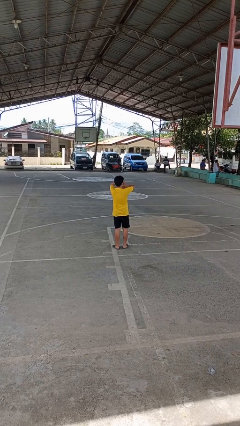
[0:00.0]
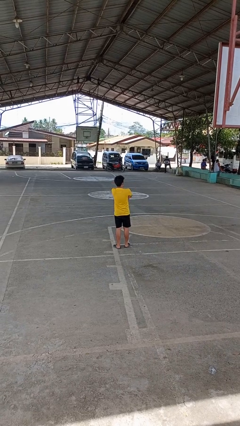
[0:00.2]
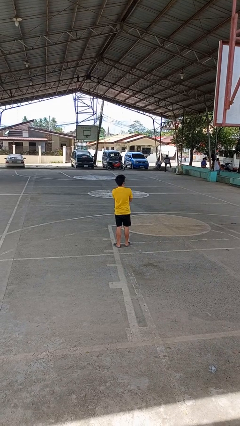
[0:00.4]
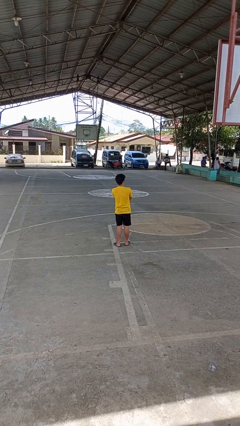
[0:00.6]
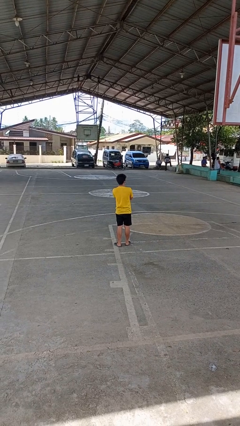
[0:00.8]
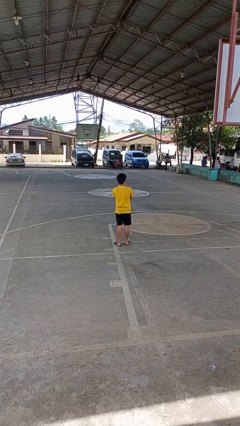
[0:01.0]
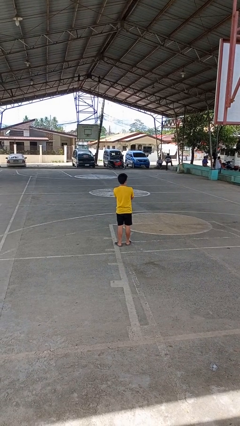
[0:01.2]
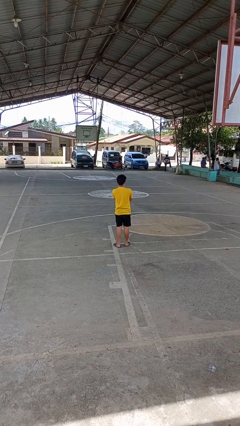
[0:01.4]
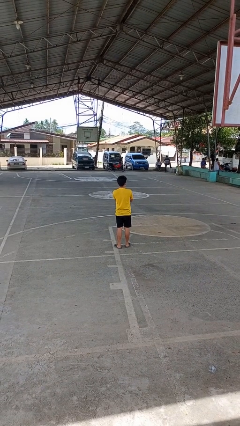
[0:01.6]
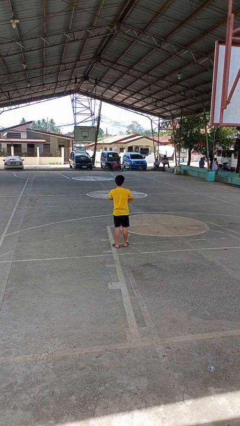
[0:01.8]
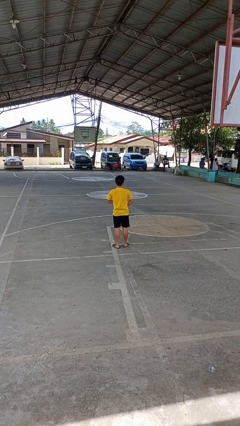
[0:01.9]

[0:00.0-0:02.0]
person crosses arms

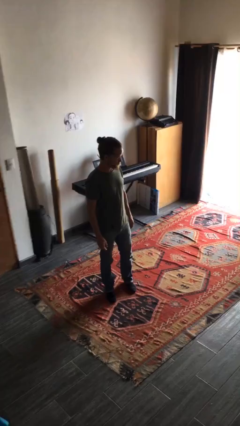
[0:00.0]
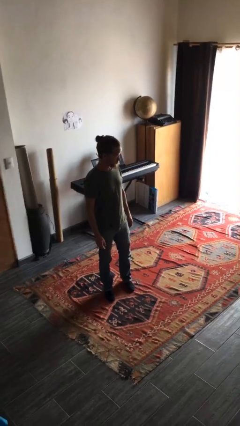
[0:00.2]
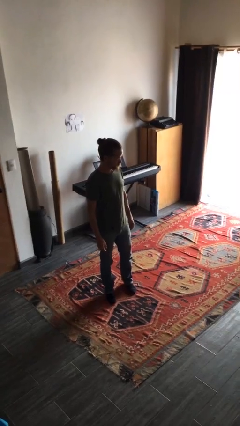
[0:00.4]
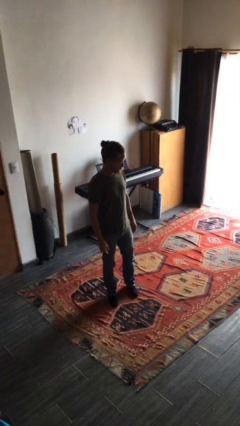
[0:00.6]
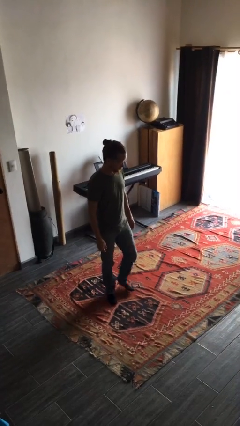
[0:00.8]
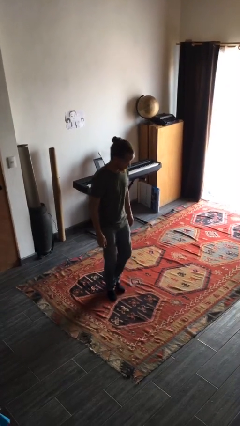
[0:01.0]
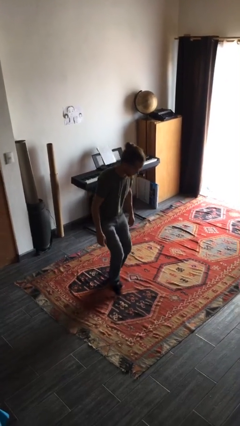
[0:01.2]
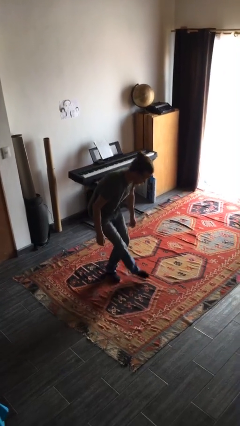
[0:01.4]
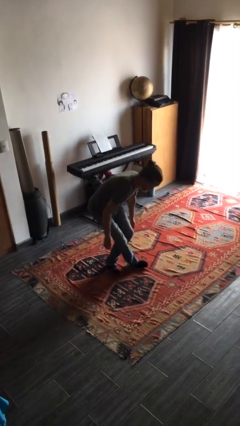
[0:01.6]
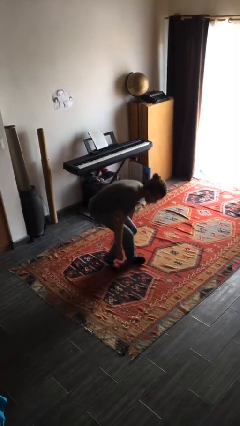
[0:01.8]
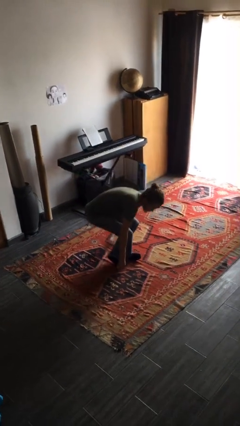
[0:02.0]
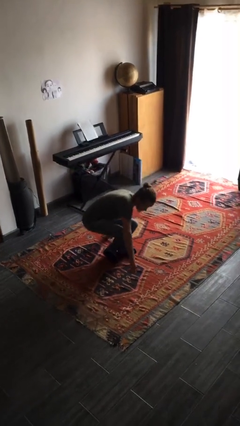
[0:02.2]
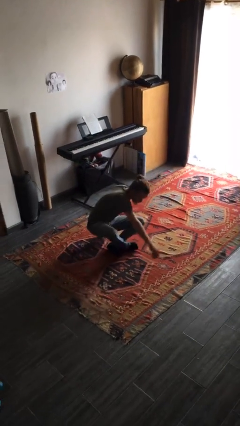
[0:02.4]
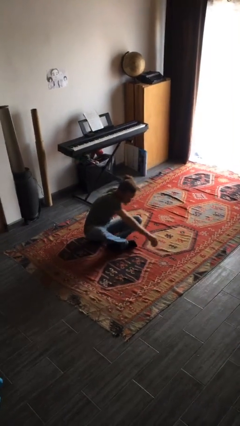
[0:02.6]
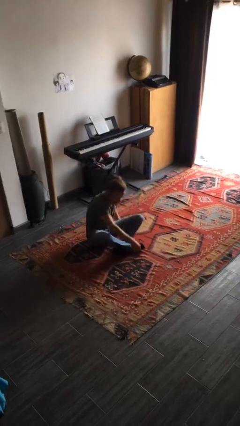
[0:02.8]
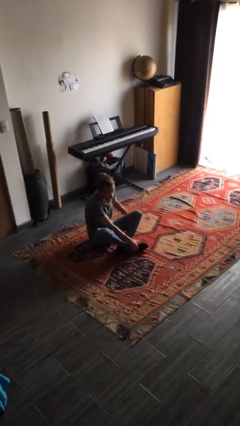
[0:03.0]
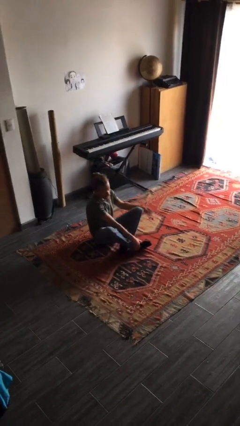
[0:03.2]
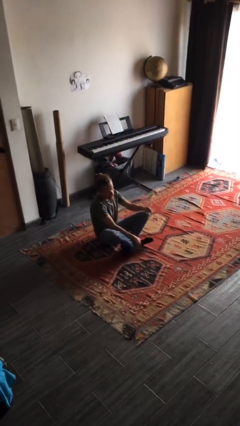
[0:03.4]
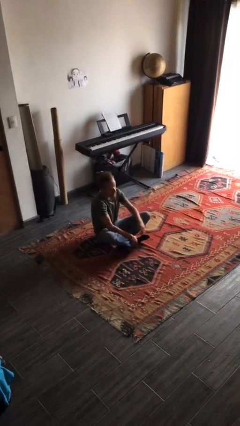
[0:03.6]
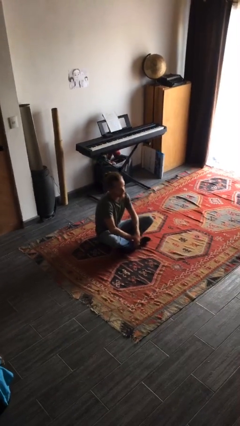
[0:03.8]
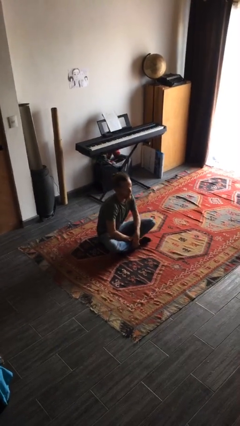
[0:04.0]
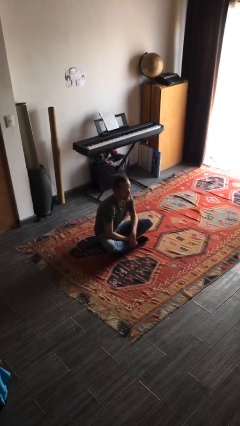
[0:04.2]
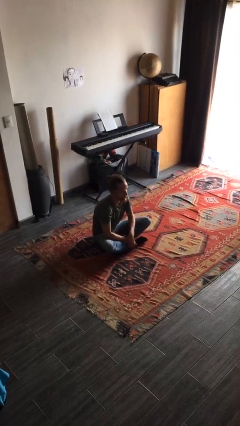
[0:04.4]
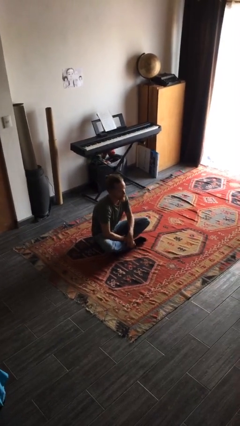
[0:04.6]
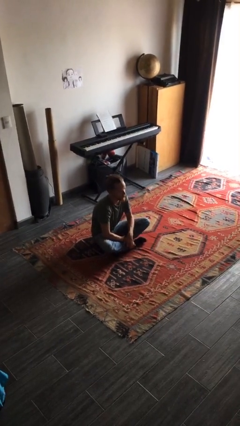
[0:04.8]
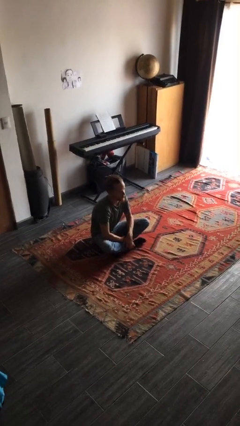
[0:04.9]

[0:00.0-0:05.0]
person sits crisscross

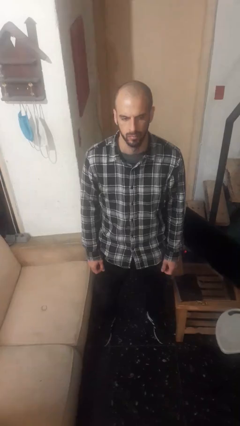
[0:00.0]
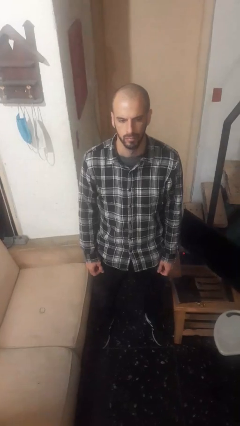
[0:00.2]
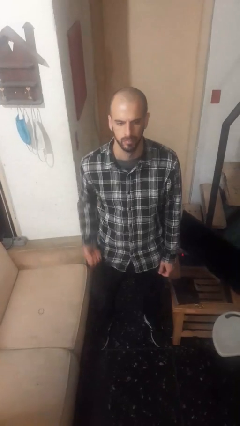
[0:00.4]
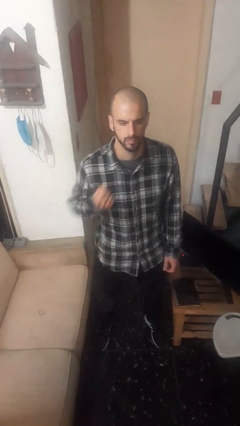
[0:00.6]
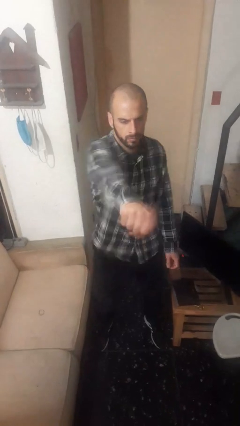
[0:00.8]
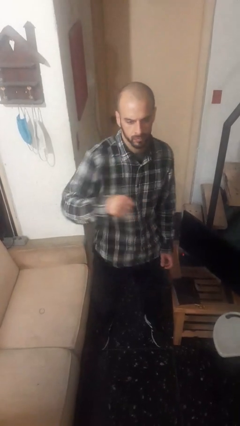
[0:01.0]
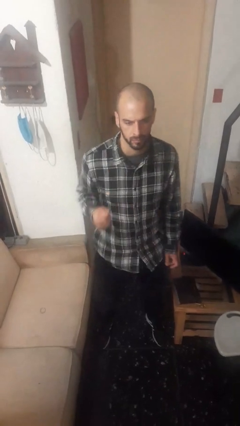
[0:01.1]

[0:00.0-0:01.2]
person punches

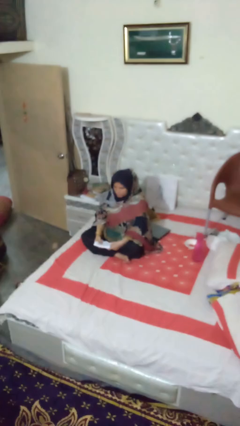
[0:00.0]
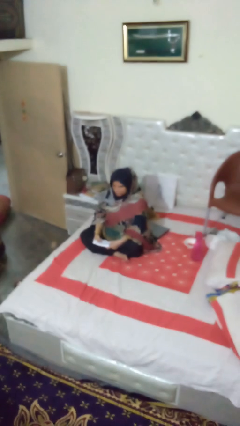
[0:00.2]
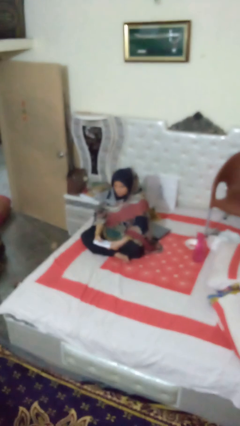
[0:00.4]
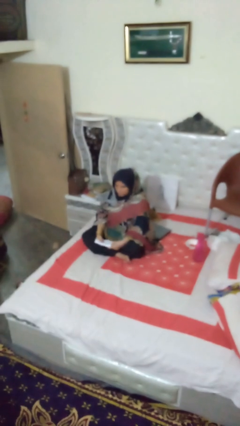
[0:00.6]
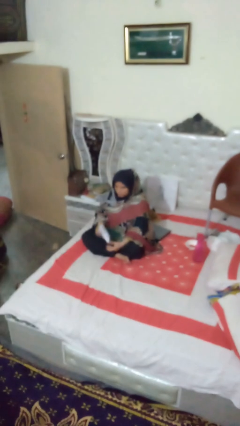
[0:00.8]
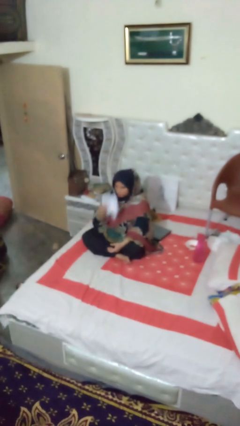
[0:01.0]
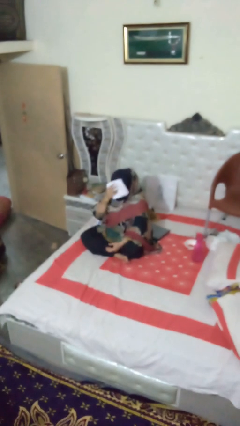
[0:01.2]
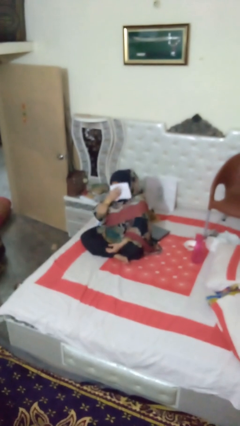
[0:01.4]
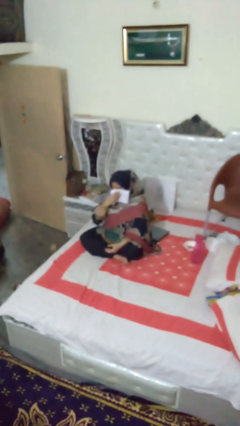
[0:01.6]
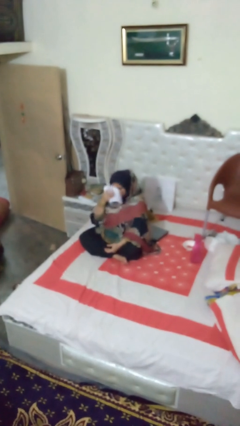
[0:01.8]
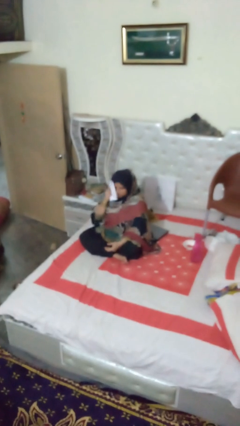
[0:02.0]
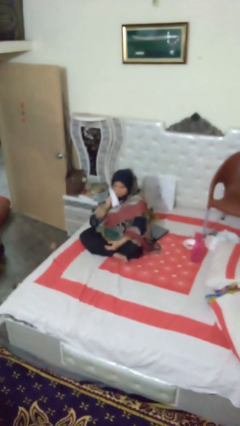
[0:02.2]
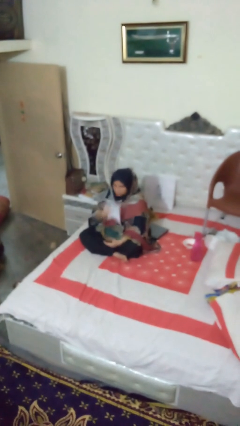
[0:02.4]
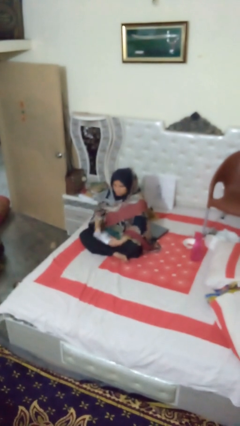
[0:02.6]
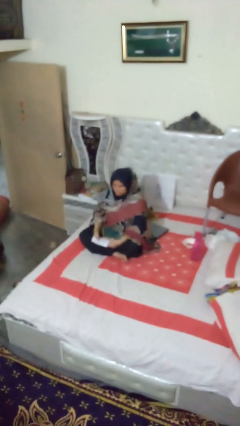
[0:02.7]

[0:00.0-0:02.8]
person wipes mouth with napkin

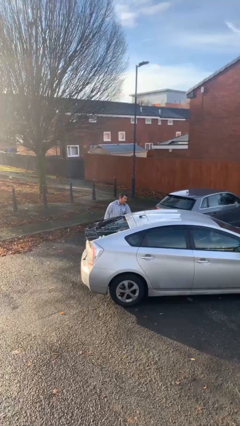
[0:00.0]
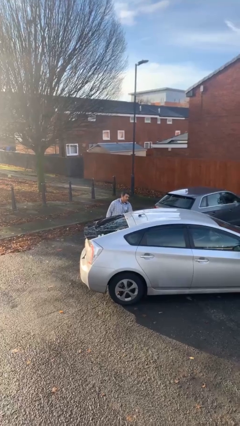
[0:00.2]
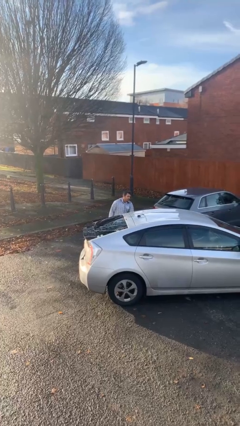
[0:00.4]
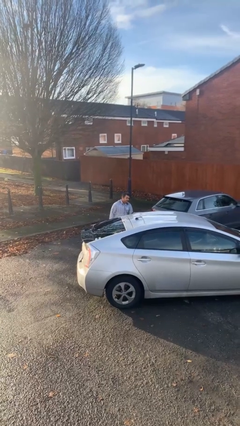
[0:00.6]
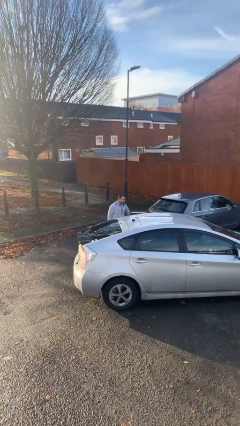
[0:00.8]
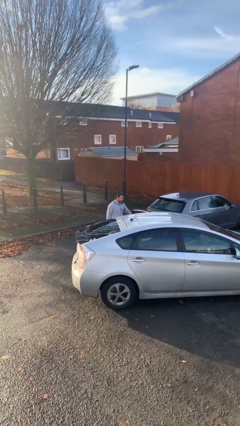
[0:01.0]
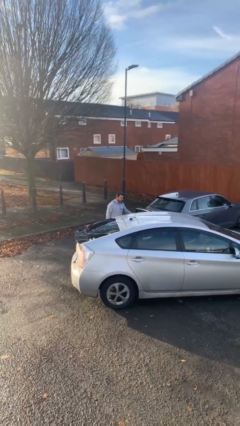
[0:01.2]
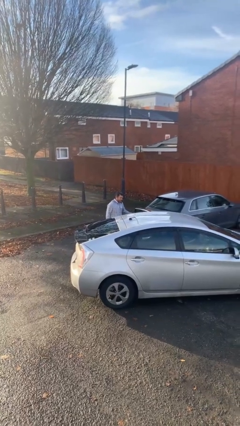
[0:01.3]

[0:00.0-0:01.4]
person opens car door

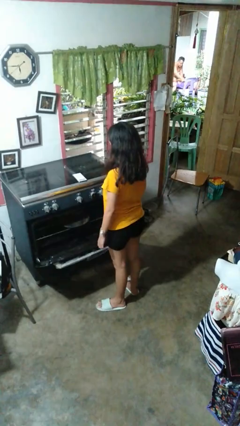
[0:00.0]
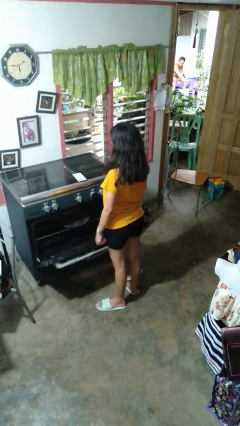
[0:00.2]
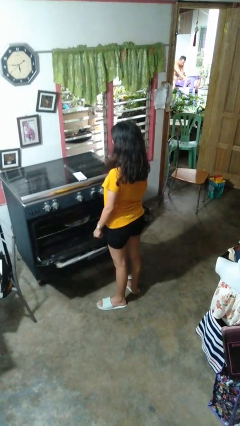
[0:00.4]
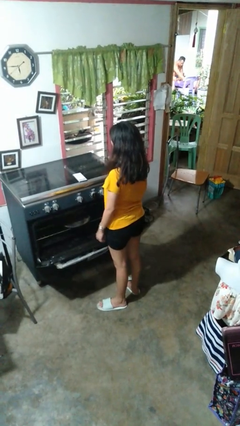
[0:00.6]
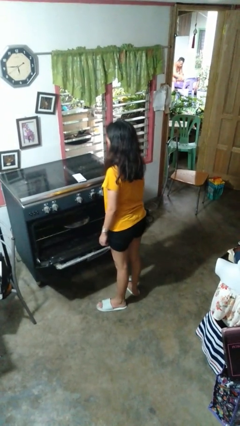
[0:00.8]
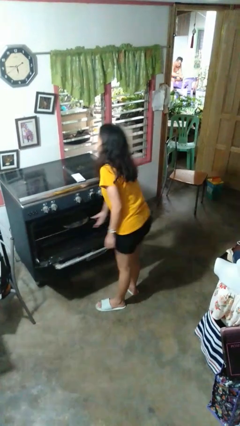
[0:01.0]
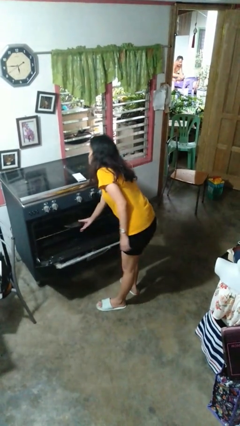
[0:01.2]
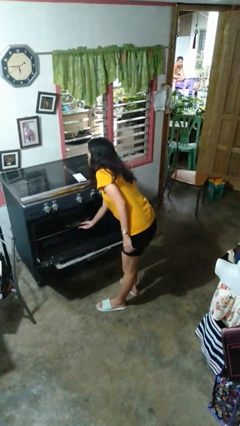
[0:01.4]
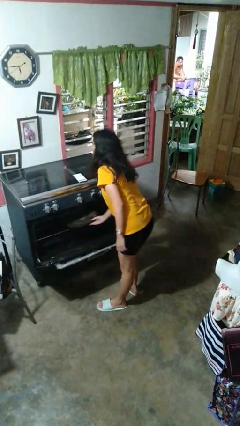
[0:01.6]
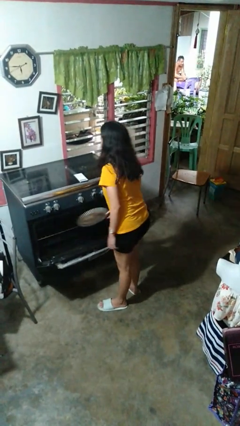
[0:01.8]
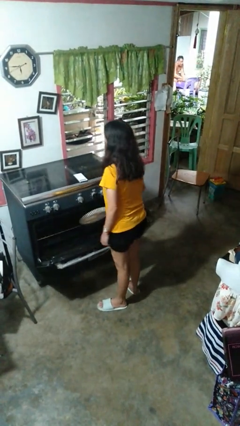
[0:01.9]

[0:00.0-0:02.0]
person takes object from oven

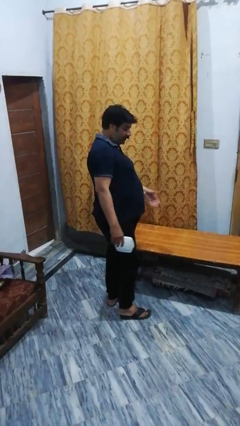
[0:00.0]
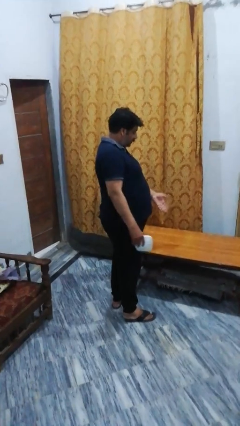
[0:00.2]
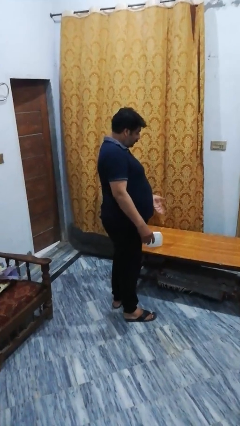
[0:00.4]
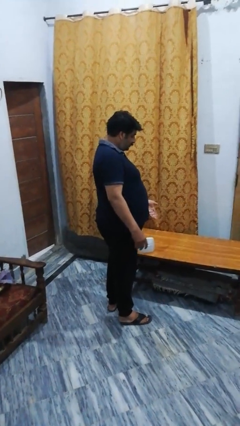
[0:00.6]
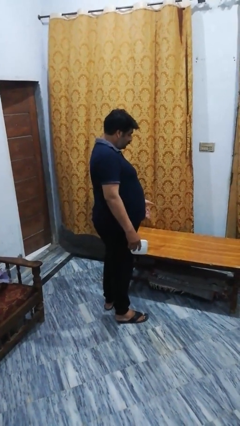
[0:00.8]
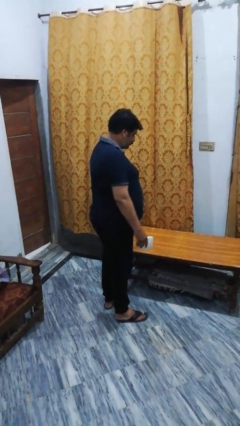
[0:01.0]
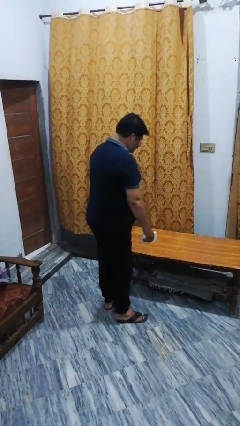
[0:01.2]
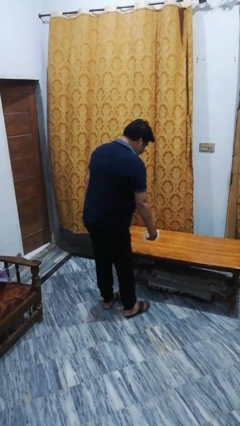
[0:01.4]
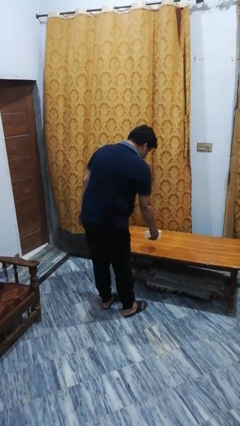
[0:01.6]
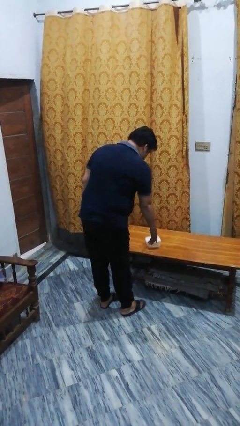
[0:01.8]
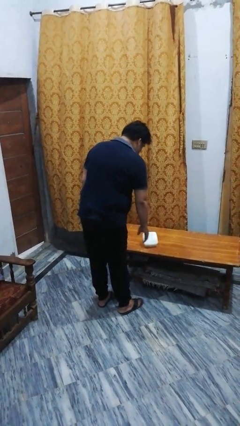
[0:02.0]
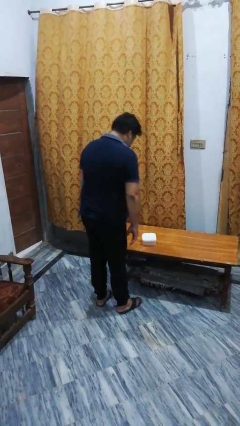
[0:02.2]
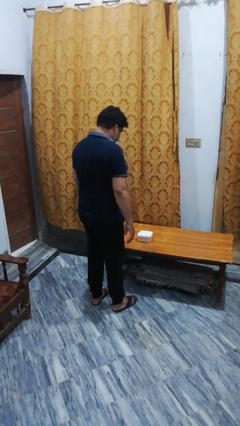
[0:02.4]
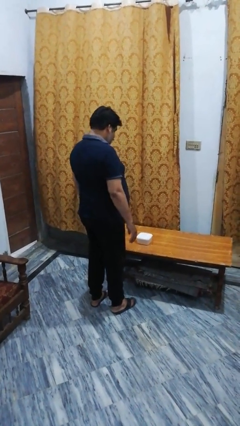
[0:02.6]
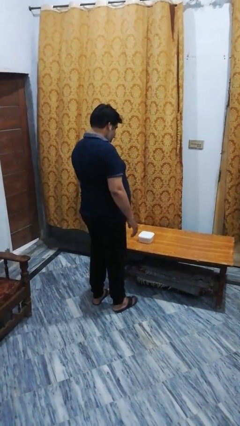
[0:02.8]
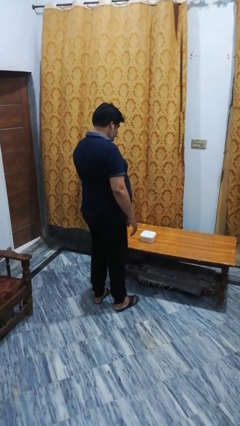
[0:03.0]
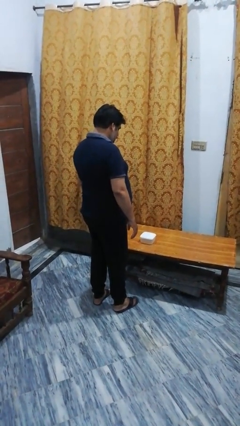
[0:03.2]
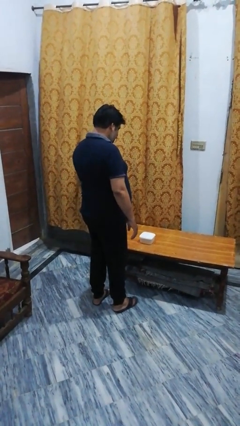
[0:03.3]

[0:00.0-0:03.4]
person throws object on table
